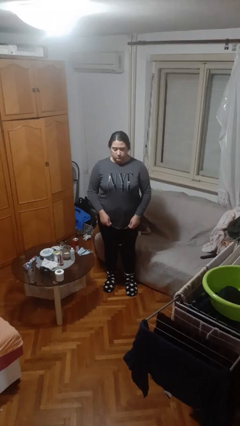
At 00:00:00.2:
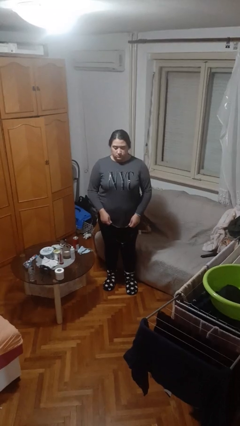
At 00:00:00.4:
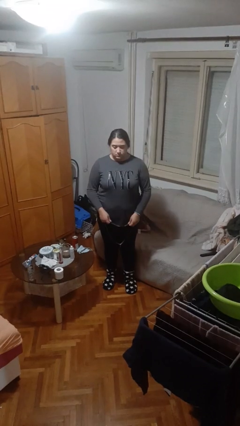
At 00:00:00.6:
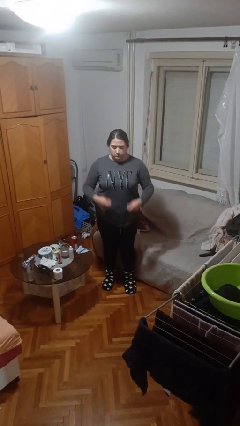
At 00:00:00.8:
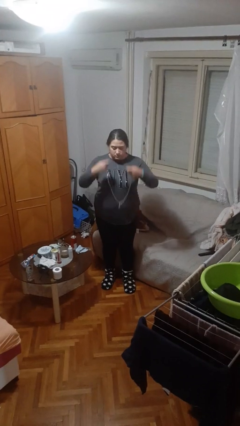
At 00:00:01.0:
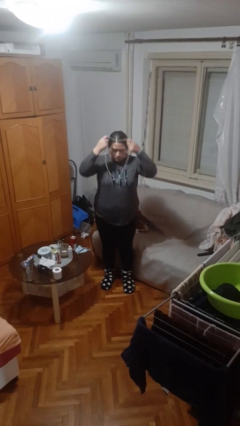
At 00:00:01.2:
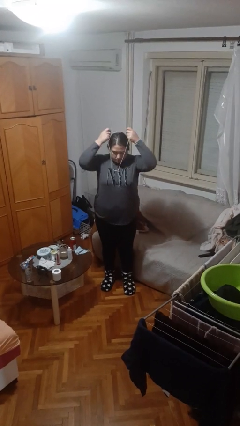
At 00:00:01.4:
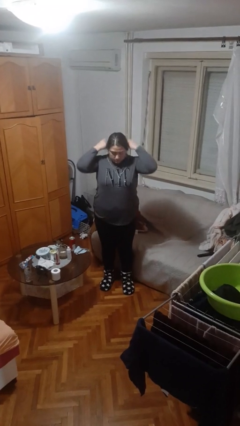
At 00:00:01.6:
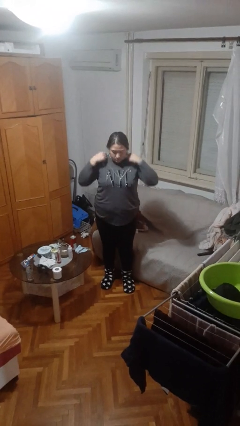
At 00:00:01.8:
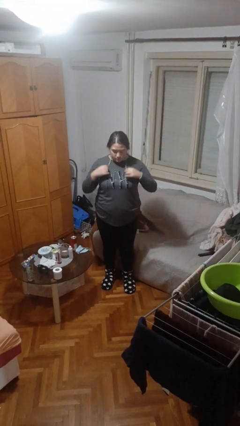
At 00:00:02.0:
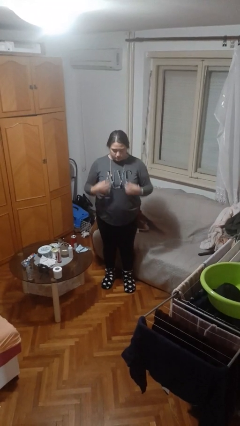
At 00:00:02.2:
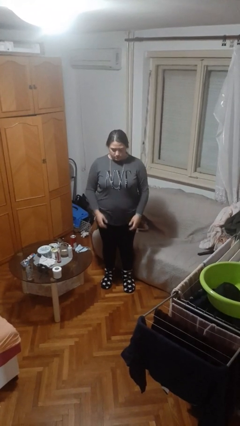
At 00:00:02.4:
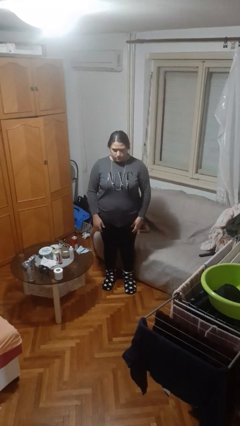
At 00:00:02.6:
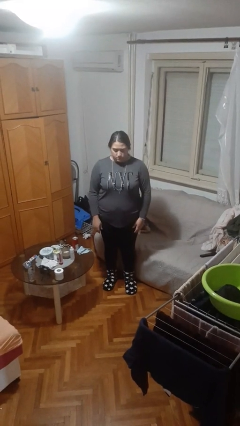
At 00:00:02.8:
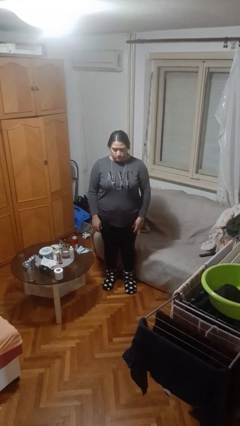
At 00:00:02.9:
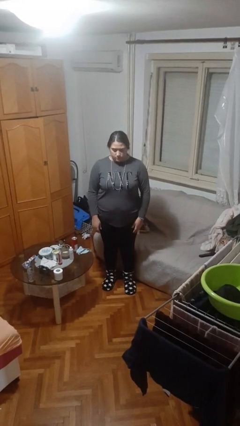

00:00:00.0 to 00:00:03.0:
person puts on necklace

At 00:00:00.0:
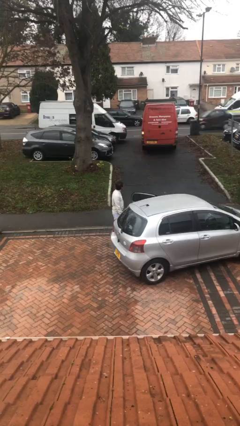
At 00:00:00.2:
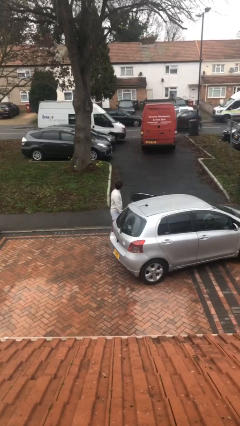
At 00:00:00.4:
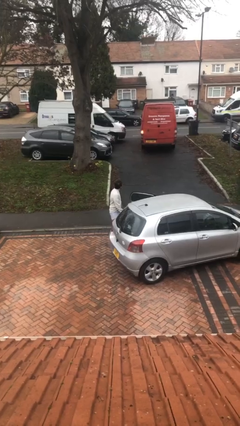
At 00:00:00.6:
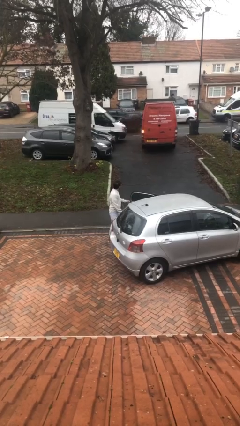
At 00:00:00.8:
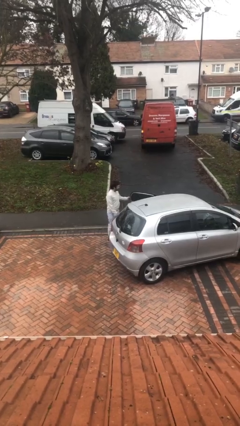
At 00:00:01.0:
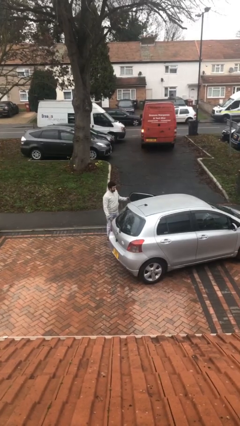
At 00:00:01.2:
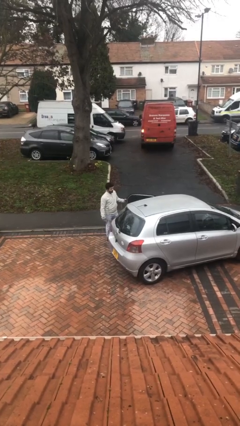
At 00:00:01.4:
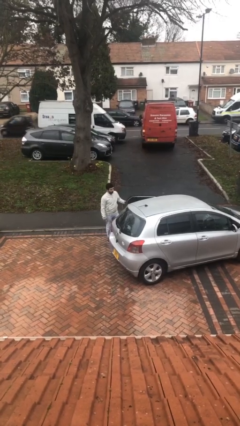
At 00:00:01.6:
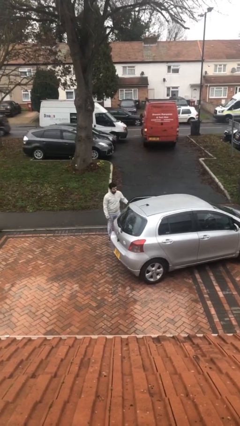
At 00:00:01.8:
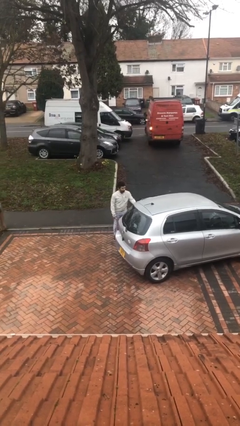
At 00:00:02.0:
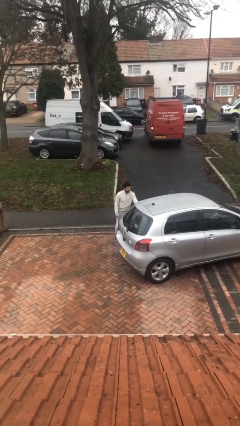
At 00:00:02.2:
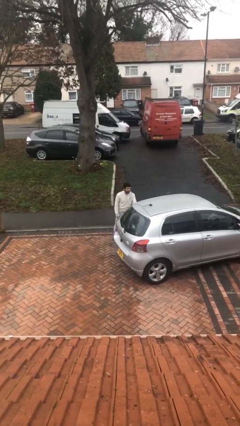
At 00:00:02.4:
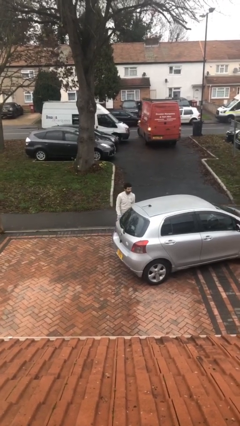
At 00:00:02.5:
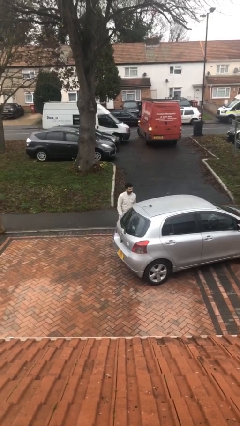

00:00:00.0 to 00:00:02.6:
person closes car door

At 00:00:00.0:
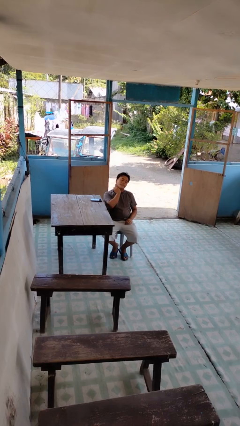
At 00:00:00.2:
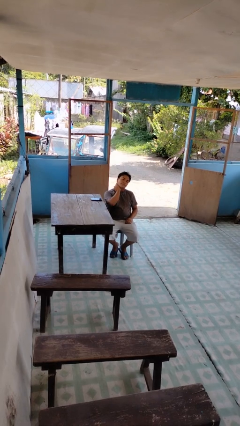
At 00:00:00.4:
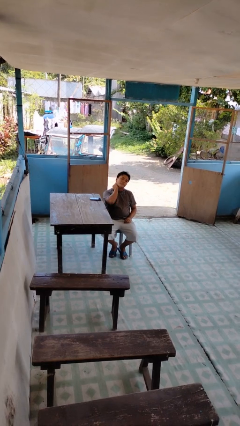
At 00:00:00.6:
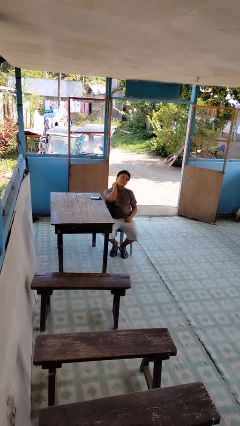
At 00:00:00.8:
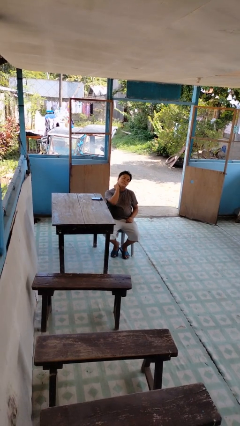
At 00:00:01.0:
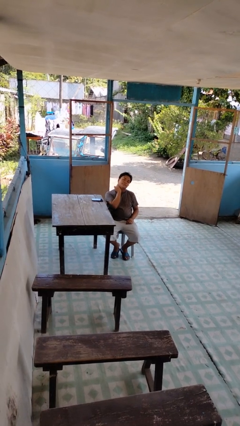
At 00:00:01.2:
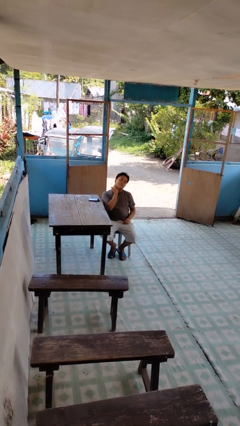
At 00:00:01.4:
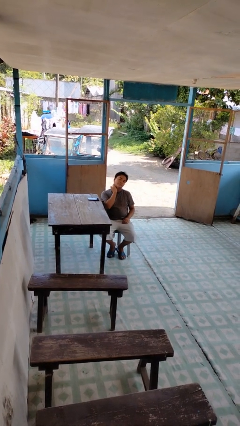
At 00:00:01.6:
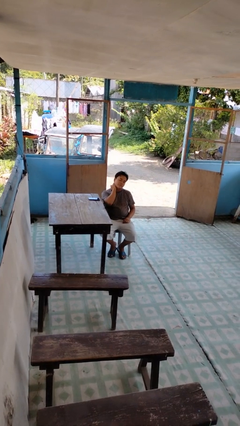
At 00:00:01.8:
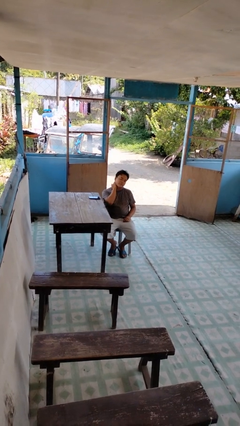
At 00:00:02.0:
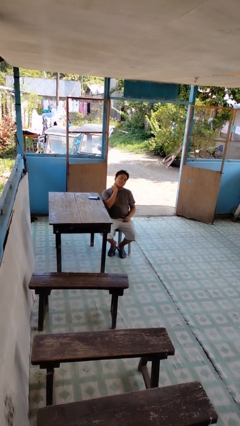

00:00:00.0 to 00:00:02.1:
person rubs neck

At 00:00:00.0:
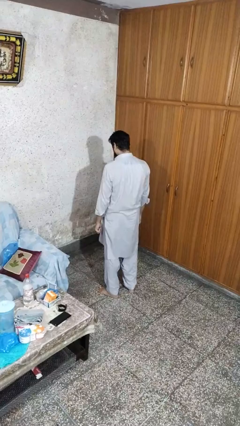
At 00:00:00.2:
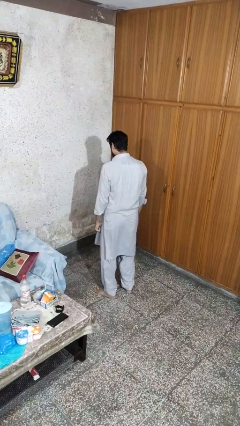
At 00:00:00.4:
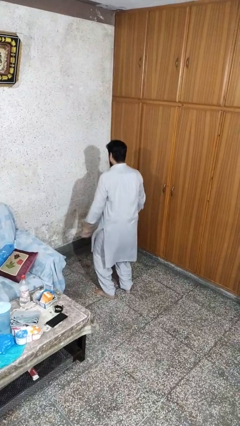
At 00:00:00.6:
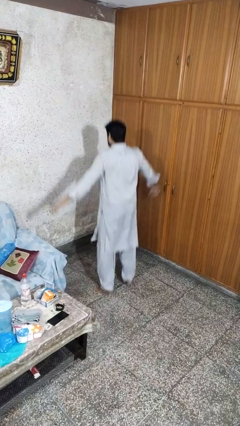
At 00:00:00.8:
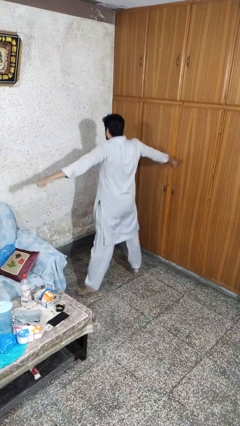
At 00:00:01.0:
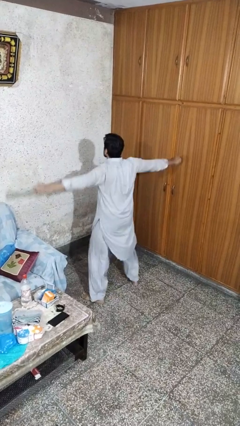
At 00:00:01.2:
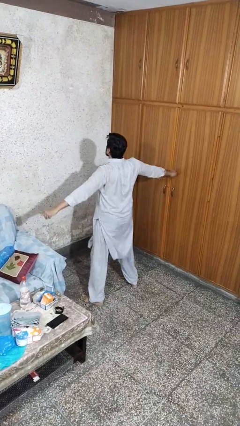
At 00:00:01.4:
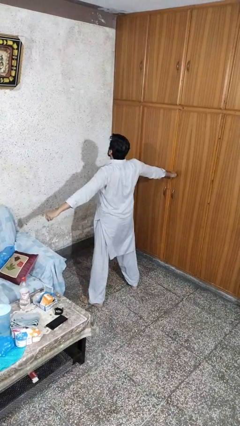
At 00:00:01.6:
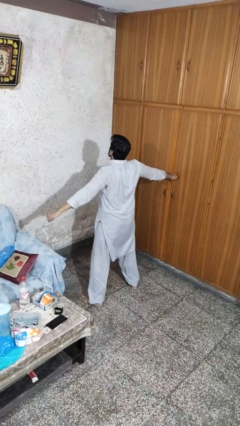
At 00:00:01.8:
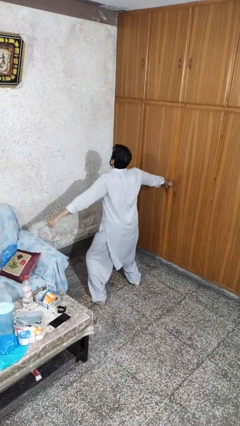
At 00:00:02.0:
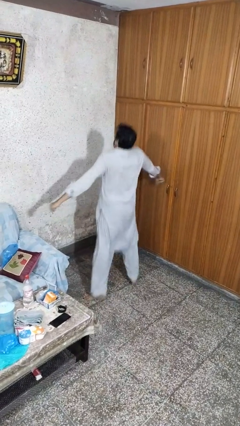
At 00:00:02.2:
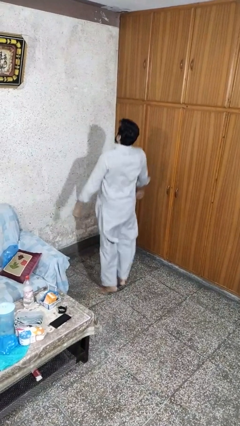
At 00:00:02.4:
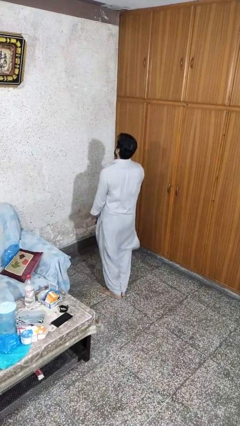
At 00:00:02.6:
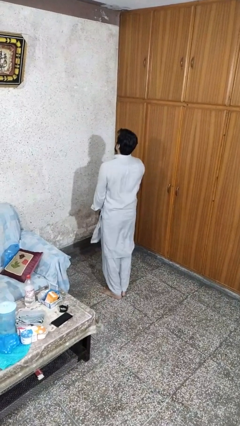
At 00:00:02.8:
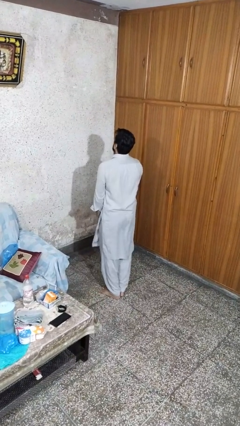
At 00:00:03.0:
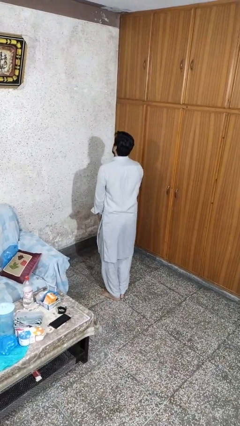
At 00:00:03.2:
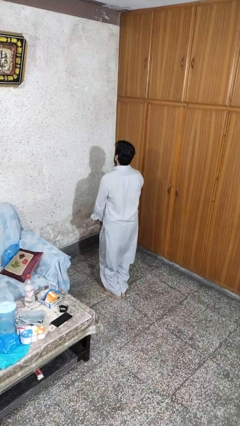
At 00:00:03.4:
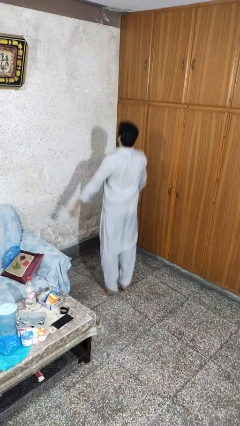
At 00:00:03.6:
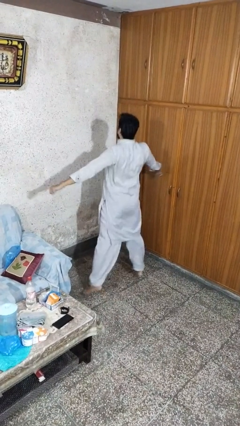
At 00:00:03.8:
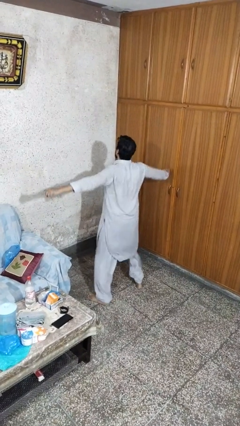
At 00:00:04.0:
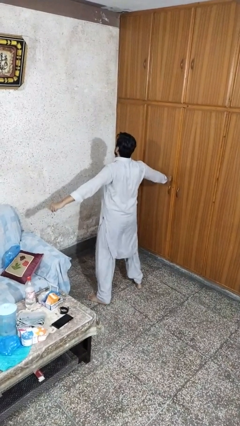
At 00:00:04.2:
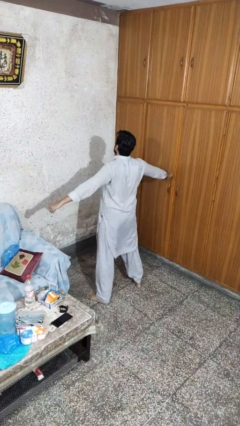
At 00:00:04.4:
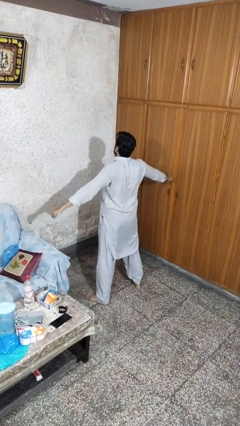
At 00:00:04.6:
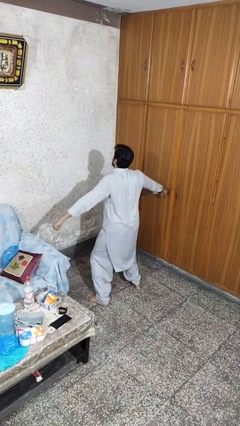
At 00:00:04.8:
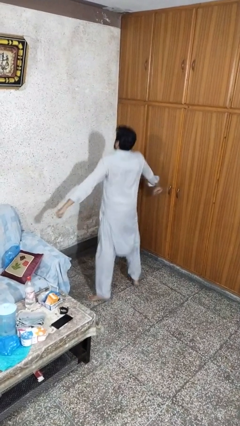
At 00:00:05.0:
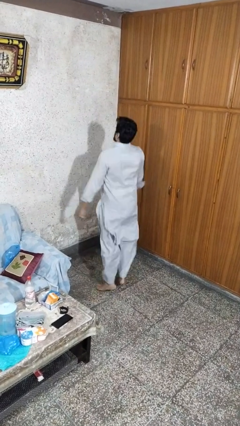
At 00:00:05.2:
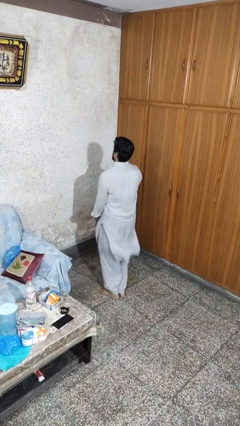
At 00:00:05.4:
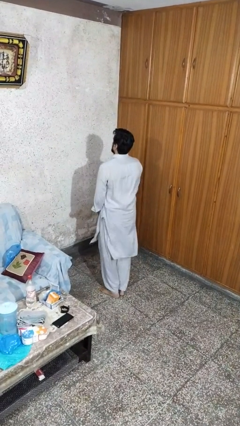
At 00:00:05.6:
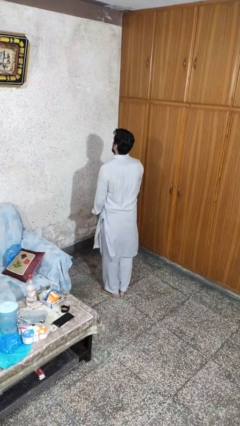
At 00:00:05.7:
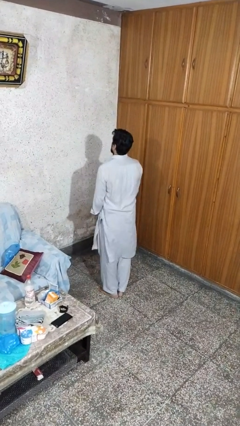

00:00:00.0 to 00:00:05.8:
person exercises with jumping jacks

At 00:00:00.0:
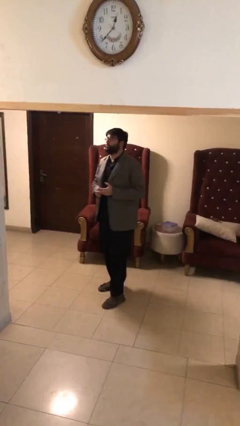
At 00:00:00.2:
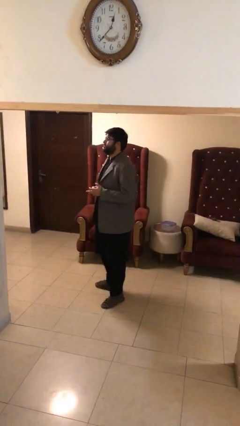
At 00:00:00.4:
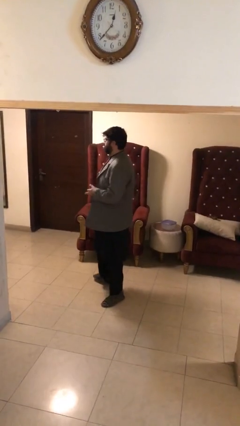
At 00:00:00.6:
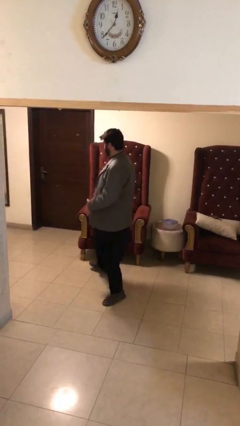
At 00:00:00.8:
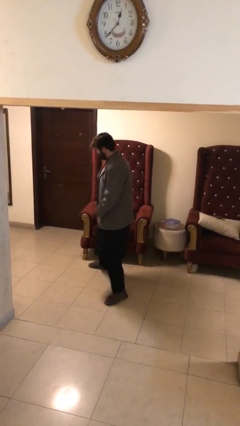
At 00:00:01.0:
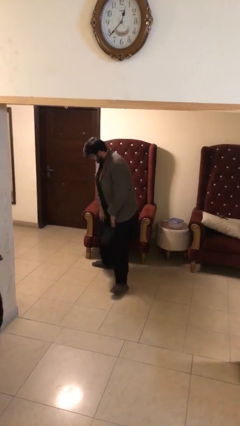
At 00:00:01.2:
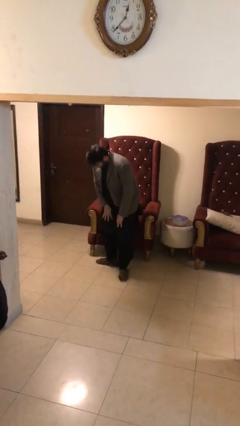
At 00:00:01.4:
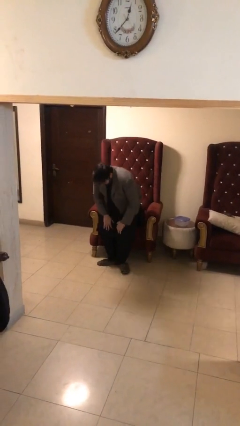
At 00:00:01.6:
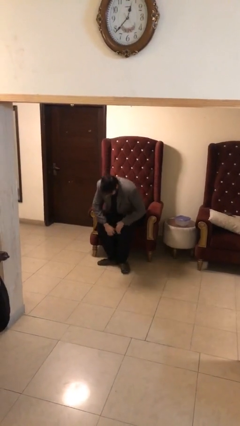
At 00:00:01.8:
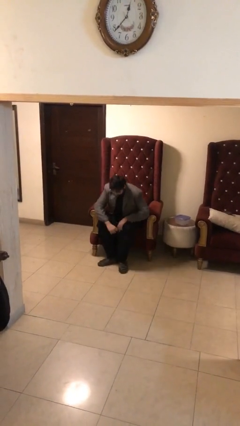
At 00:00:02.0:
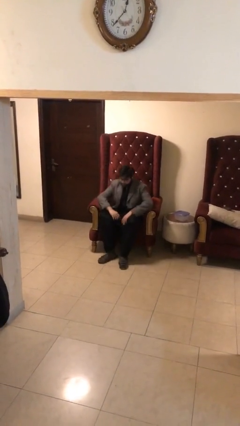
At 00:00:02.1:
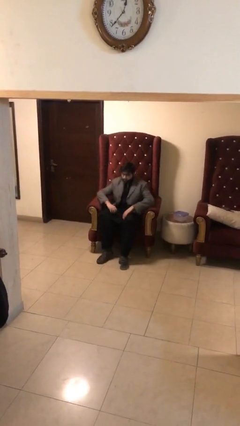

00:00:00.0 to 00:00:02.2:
person sits down

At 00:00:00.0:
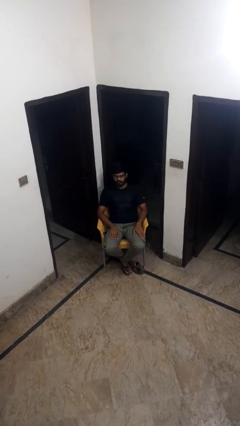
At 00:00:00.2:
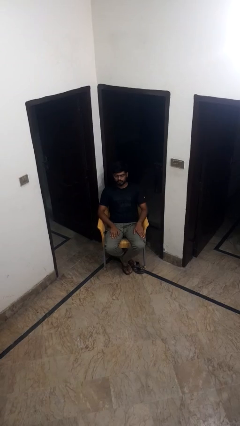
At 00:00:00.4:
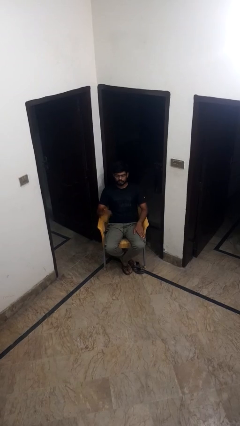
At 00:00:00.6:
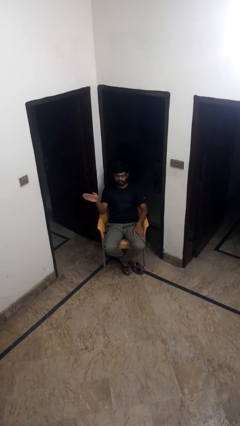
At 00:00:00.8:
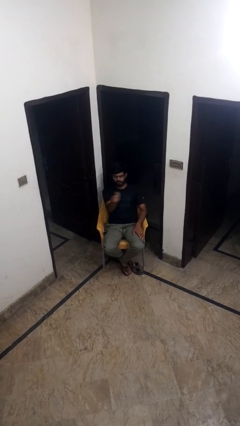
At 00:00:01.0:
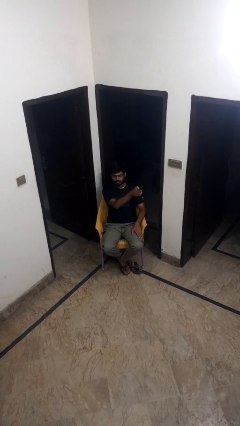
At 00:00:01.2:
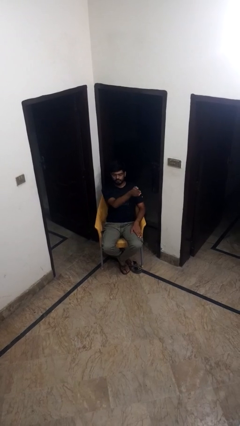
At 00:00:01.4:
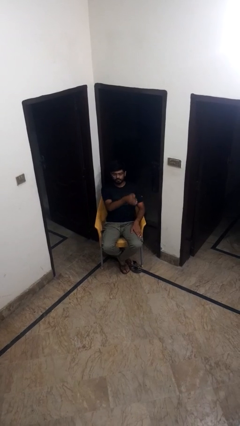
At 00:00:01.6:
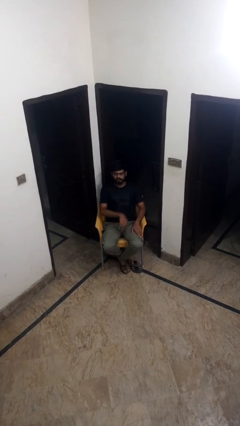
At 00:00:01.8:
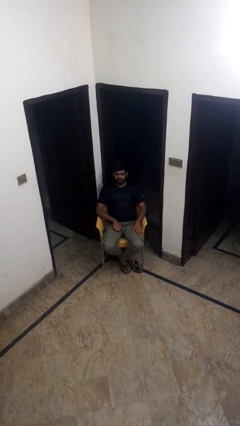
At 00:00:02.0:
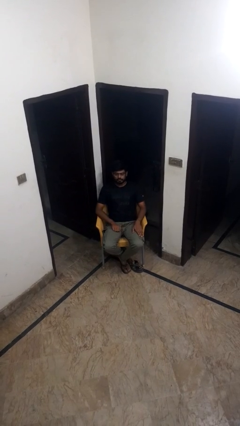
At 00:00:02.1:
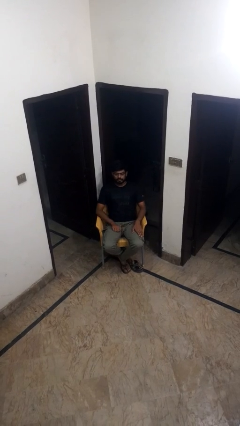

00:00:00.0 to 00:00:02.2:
person gestures swipe left
